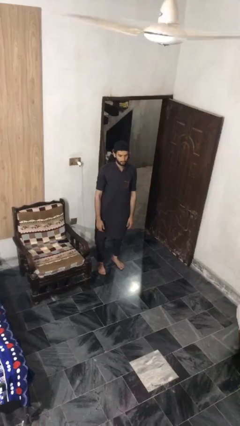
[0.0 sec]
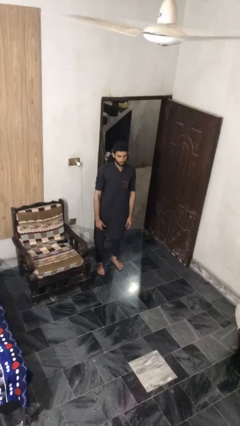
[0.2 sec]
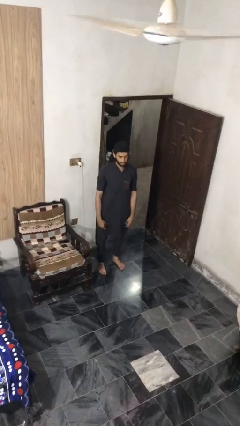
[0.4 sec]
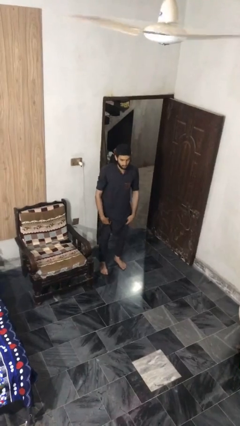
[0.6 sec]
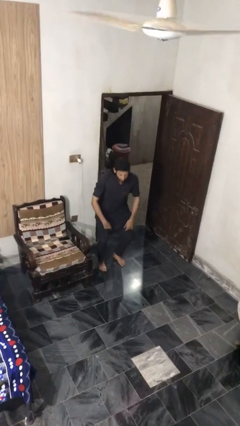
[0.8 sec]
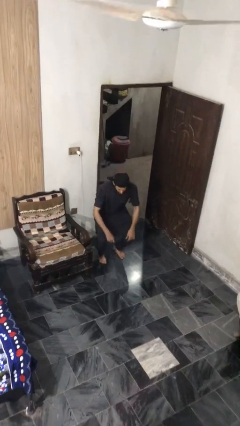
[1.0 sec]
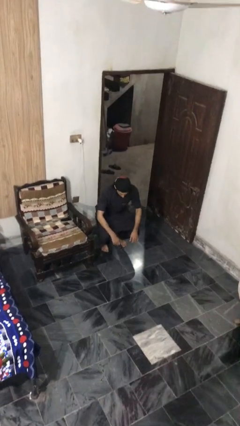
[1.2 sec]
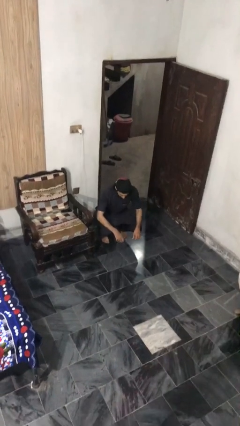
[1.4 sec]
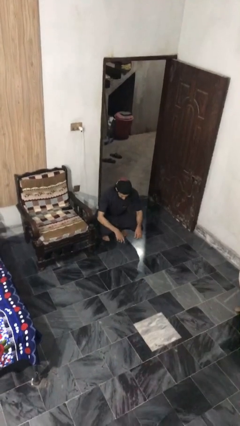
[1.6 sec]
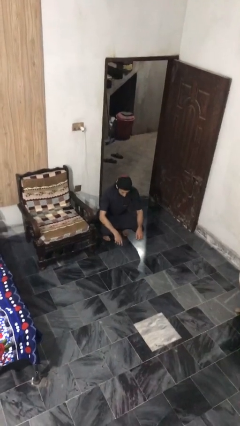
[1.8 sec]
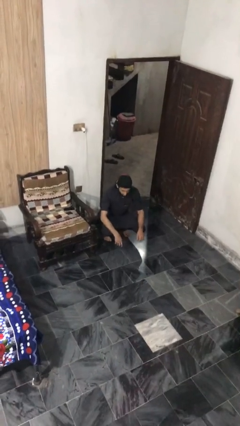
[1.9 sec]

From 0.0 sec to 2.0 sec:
person squats

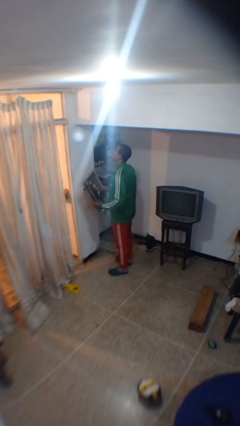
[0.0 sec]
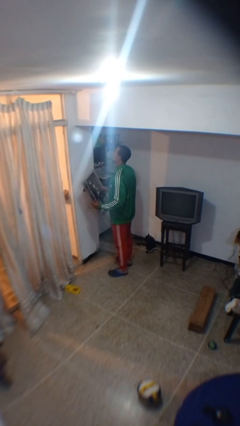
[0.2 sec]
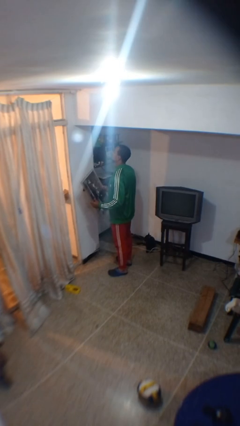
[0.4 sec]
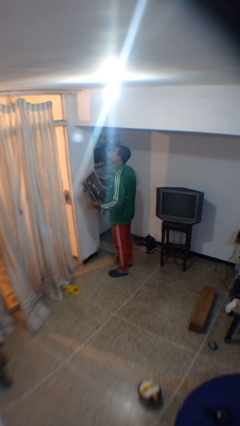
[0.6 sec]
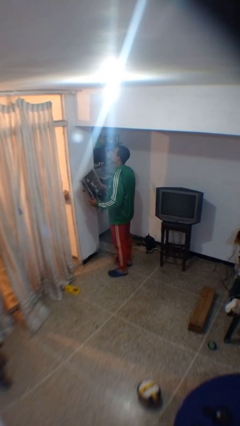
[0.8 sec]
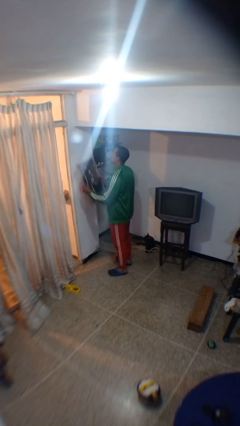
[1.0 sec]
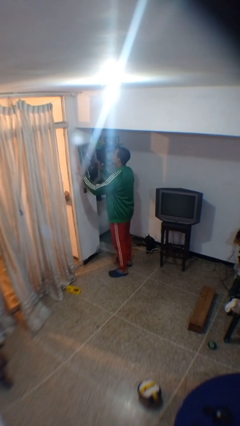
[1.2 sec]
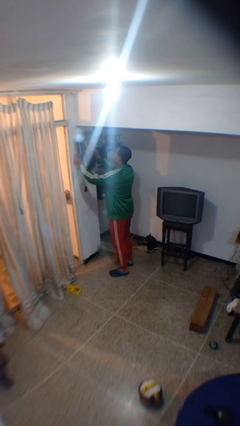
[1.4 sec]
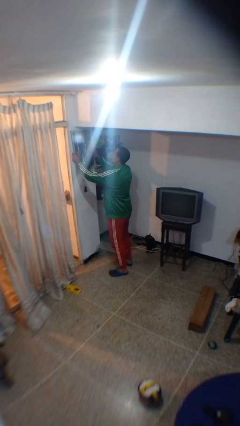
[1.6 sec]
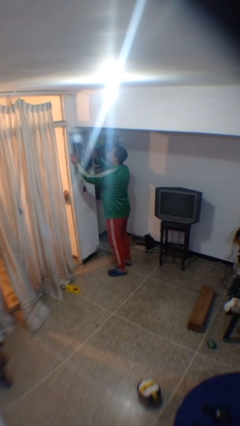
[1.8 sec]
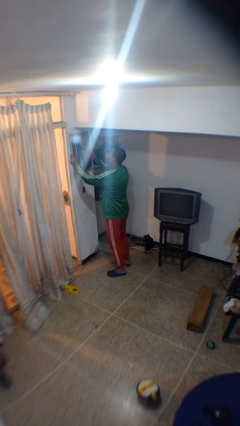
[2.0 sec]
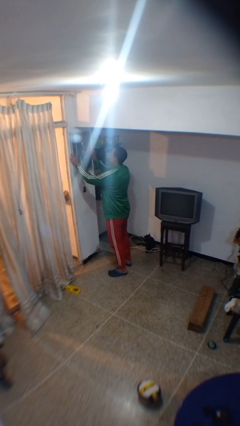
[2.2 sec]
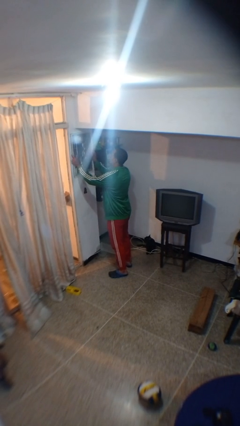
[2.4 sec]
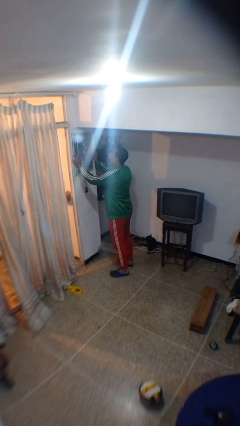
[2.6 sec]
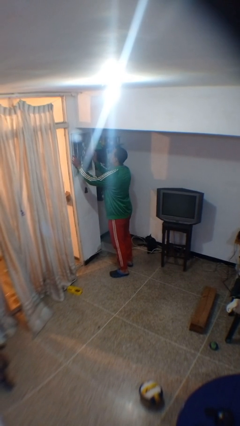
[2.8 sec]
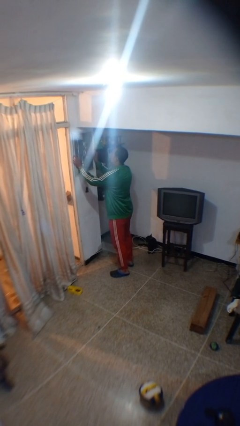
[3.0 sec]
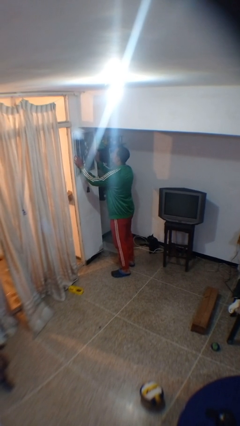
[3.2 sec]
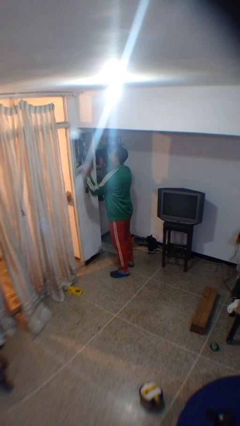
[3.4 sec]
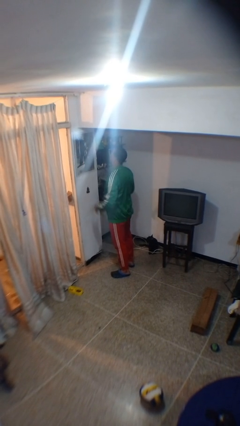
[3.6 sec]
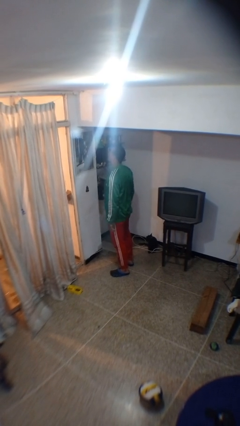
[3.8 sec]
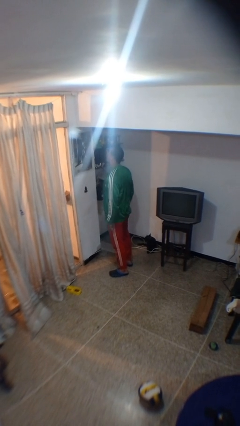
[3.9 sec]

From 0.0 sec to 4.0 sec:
person puts up picture frame

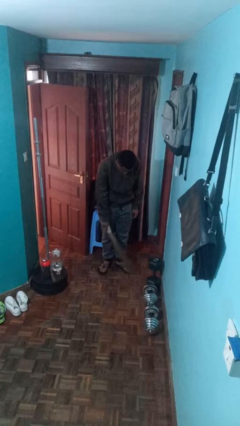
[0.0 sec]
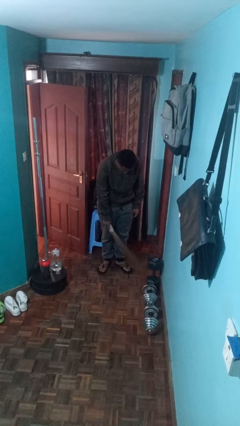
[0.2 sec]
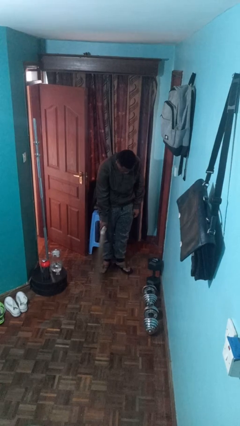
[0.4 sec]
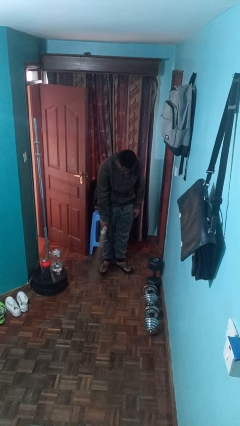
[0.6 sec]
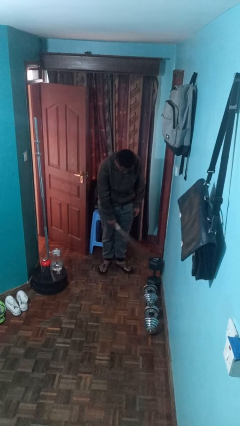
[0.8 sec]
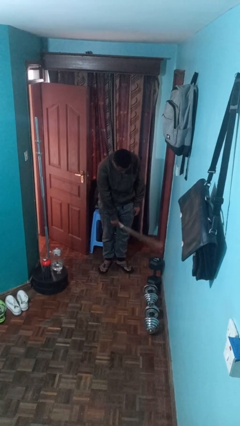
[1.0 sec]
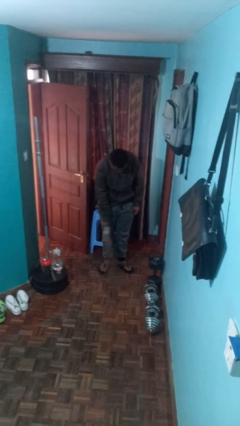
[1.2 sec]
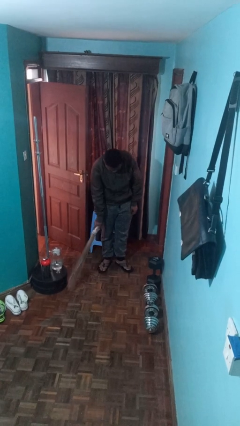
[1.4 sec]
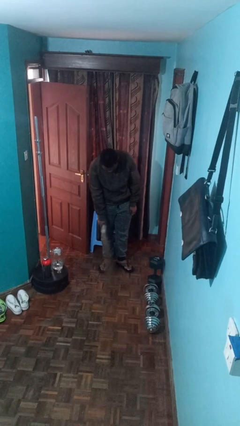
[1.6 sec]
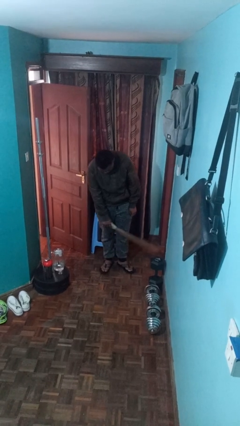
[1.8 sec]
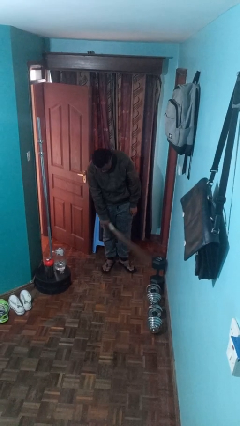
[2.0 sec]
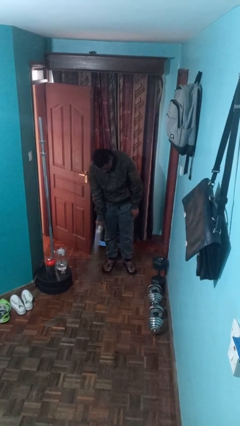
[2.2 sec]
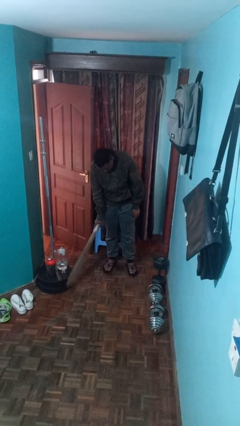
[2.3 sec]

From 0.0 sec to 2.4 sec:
person sweeps floor

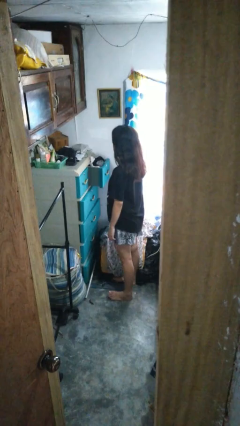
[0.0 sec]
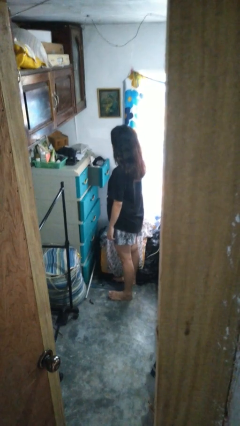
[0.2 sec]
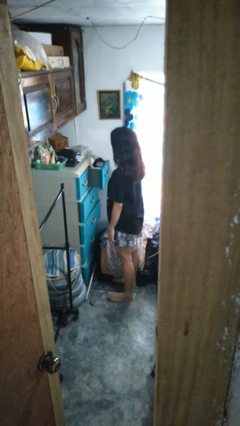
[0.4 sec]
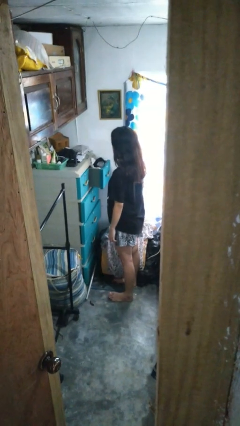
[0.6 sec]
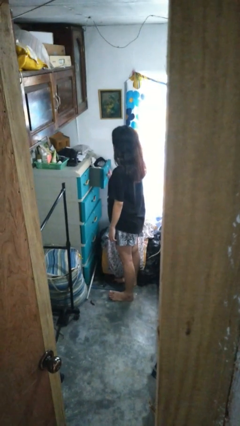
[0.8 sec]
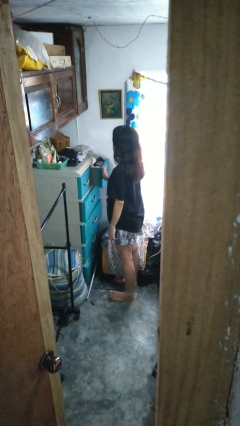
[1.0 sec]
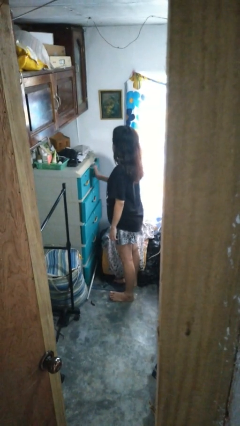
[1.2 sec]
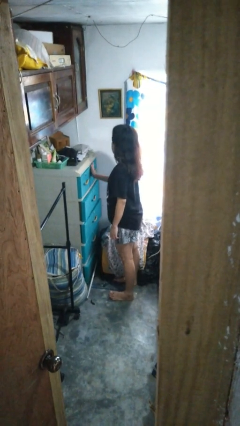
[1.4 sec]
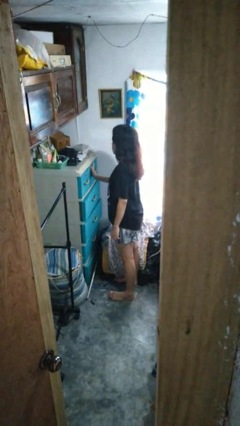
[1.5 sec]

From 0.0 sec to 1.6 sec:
person closes dresser drawer

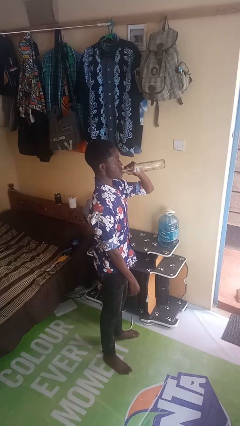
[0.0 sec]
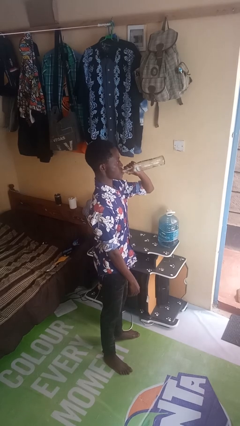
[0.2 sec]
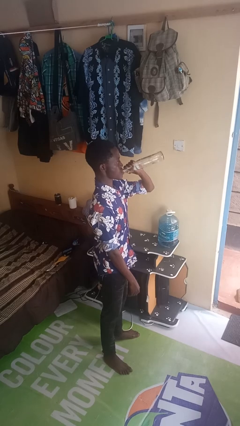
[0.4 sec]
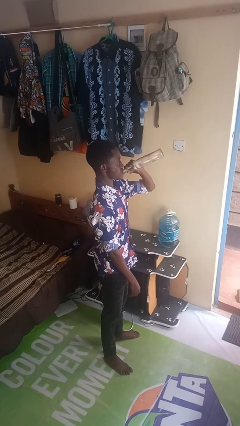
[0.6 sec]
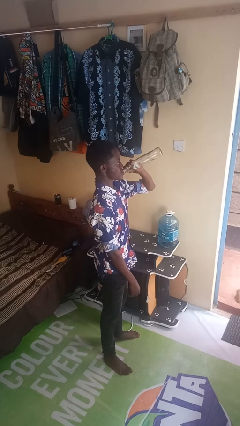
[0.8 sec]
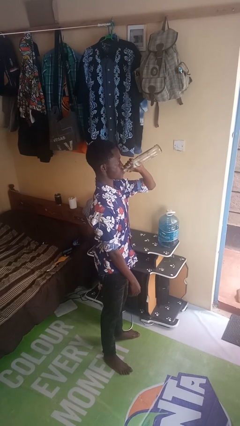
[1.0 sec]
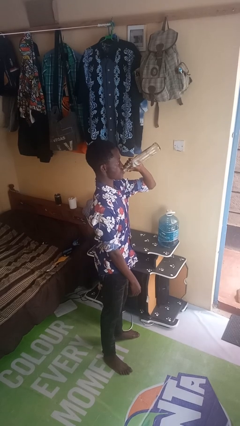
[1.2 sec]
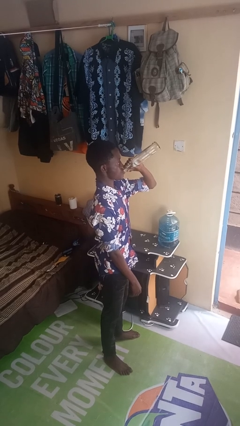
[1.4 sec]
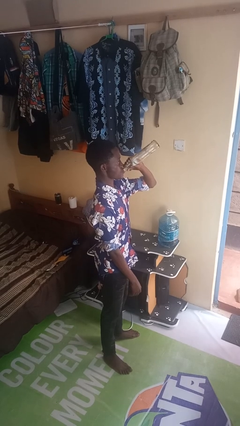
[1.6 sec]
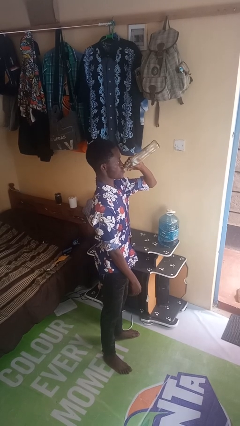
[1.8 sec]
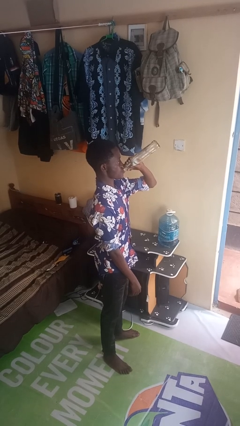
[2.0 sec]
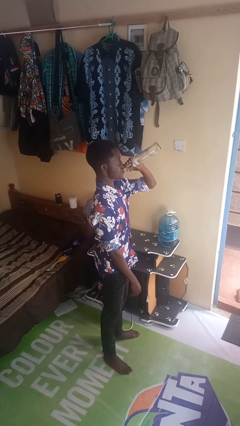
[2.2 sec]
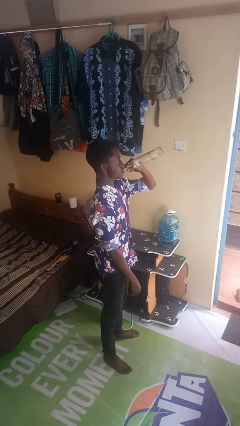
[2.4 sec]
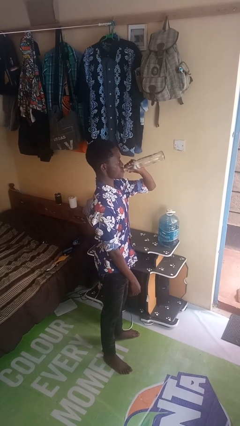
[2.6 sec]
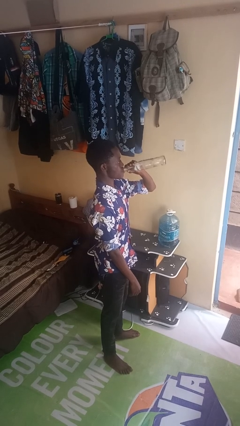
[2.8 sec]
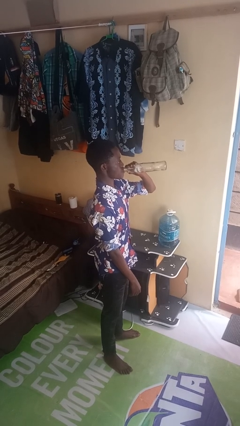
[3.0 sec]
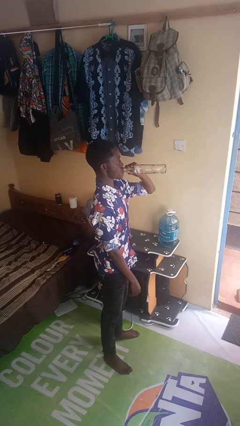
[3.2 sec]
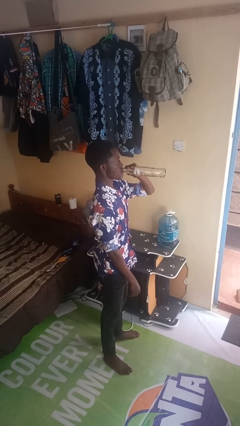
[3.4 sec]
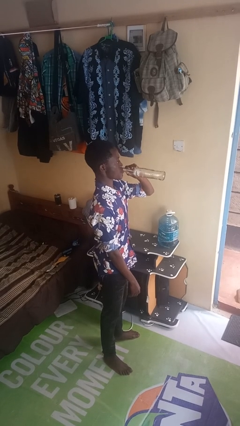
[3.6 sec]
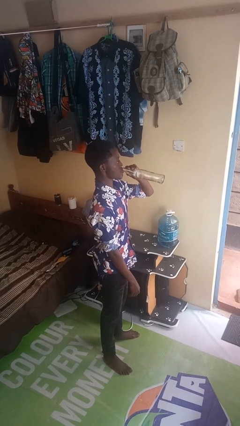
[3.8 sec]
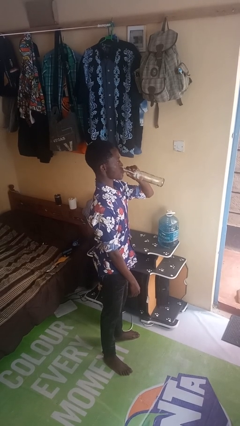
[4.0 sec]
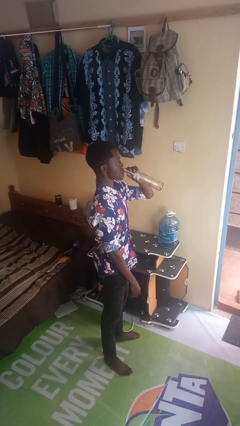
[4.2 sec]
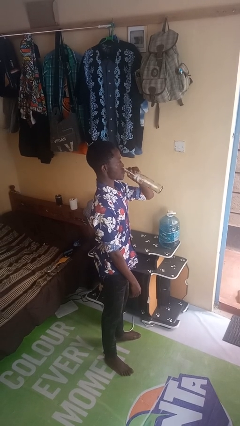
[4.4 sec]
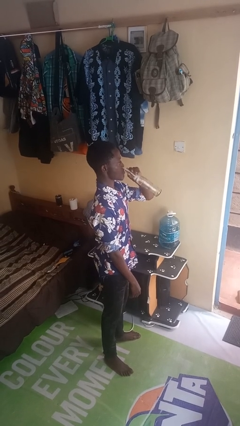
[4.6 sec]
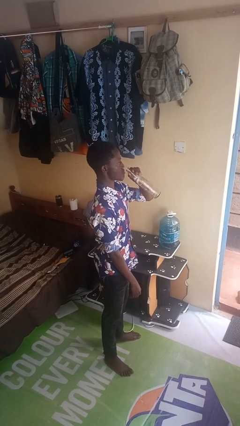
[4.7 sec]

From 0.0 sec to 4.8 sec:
person drinks from bottle

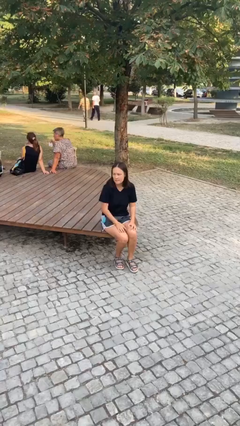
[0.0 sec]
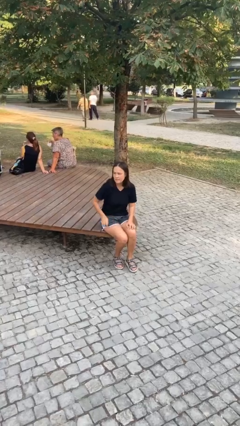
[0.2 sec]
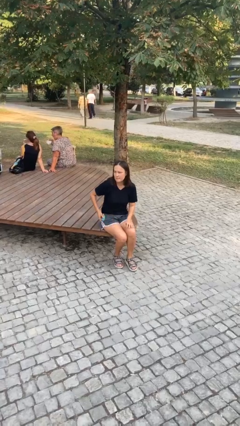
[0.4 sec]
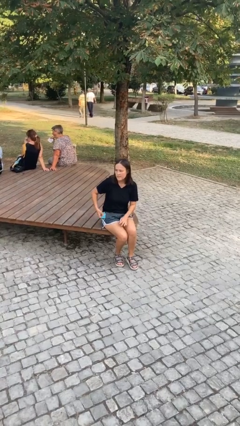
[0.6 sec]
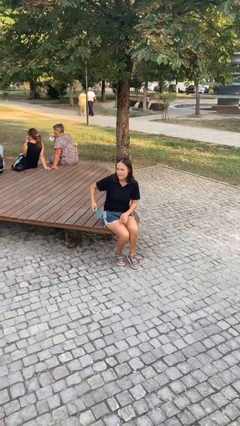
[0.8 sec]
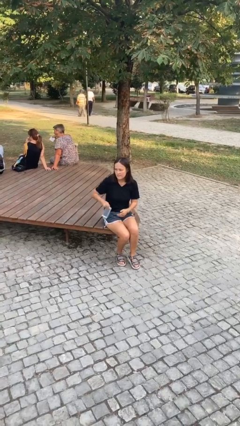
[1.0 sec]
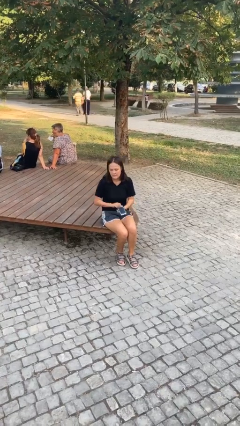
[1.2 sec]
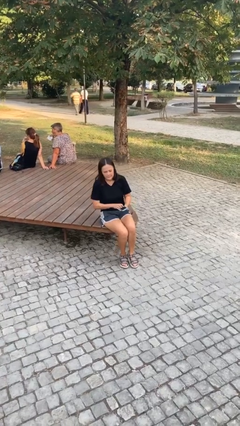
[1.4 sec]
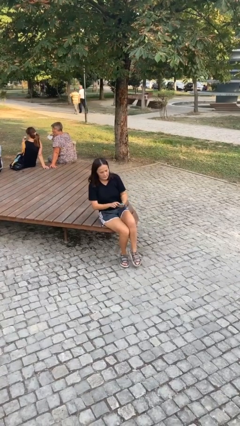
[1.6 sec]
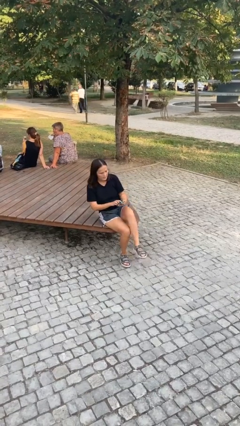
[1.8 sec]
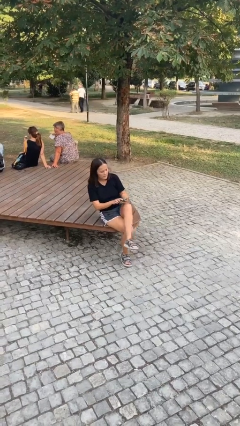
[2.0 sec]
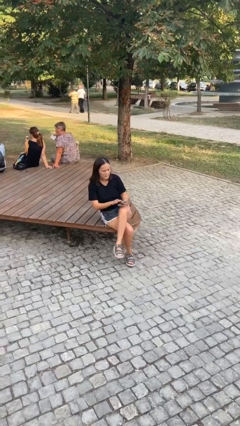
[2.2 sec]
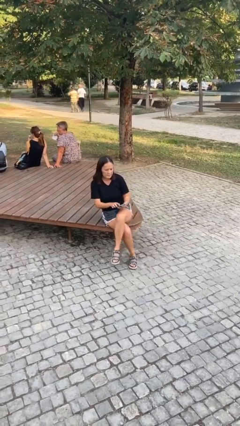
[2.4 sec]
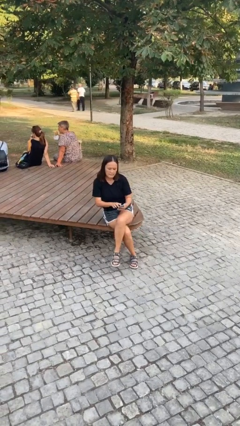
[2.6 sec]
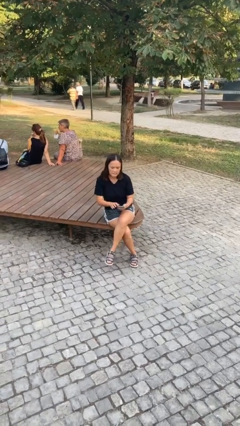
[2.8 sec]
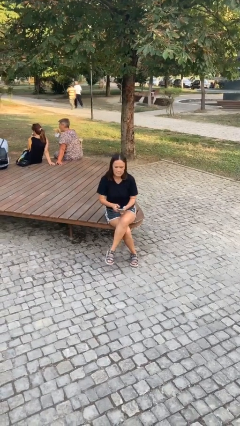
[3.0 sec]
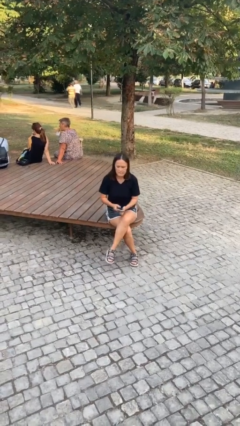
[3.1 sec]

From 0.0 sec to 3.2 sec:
person takes phone from pocket
